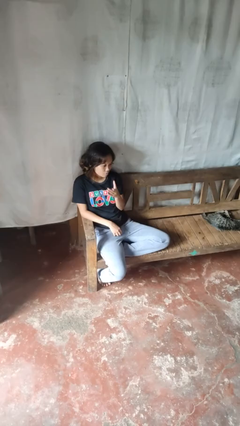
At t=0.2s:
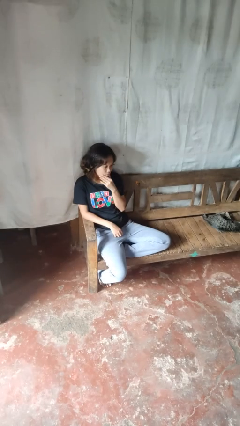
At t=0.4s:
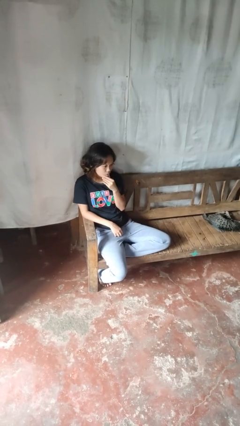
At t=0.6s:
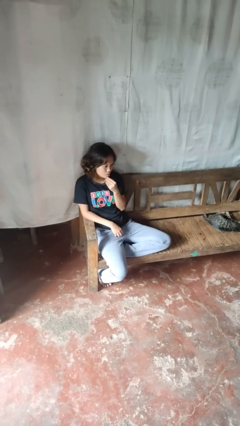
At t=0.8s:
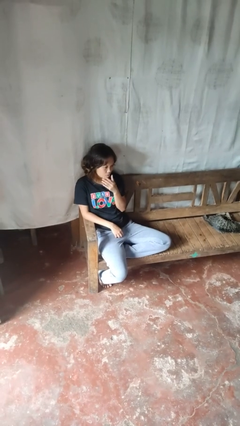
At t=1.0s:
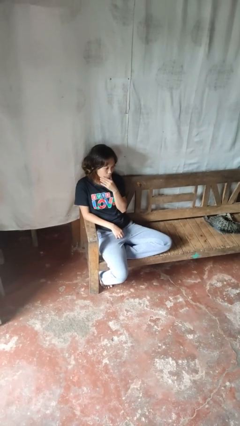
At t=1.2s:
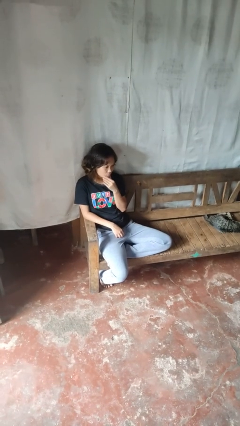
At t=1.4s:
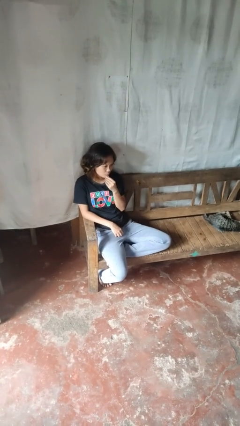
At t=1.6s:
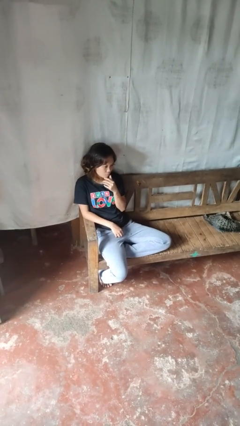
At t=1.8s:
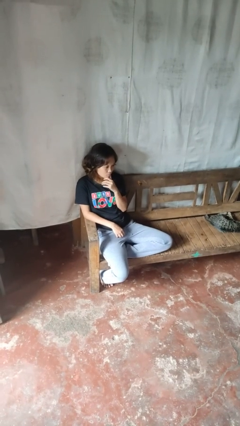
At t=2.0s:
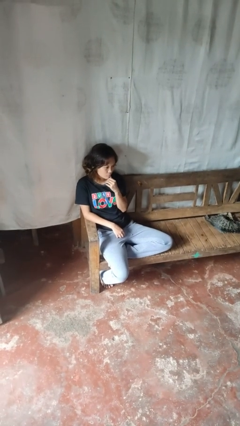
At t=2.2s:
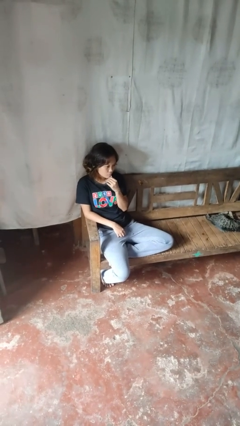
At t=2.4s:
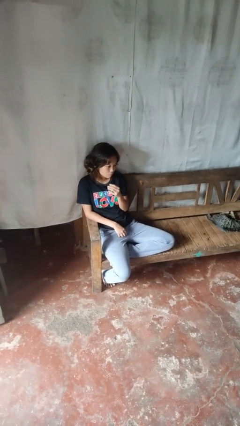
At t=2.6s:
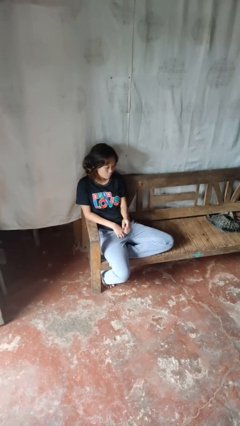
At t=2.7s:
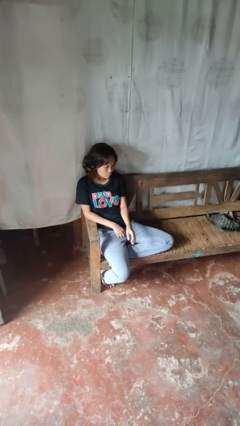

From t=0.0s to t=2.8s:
person strokes chin

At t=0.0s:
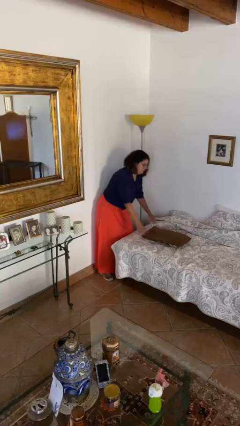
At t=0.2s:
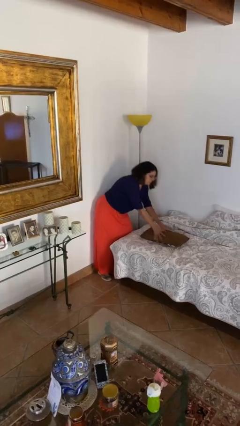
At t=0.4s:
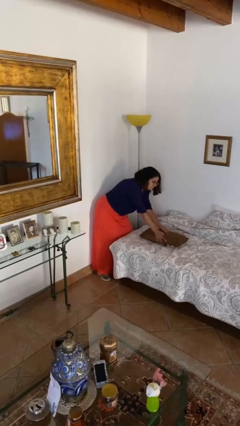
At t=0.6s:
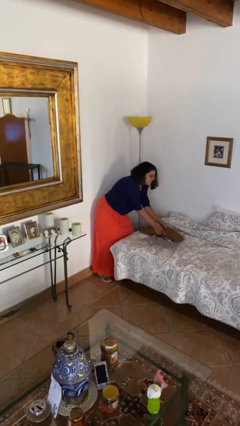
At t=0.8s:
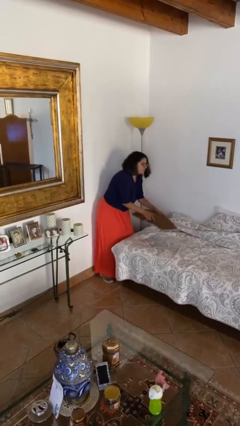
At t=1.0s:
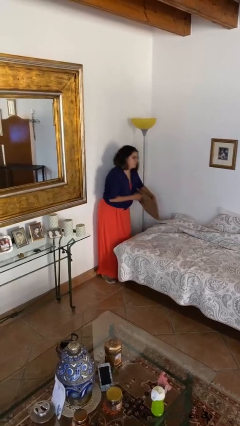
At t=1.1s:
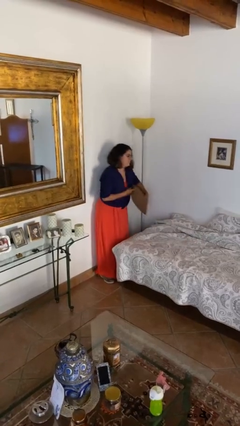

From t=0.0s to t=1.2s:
person picks up object from bed

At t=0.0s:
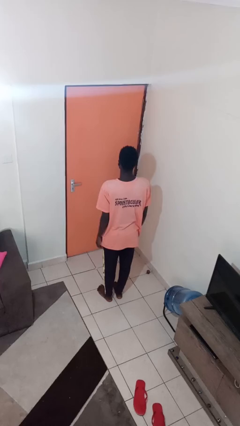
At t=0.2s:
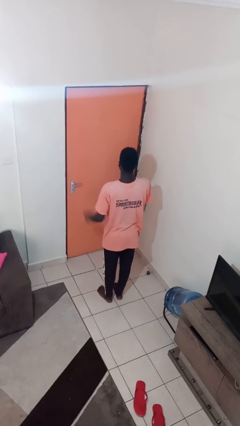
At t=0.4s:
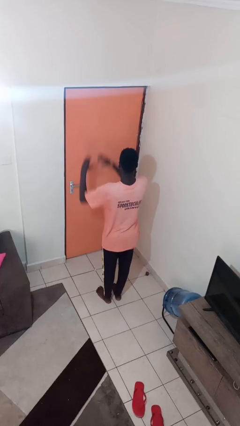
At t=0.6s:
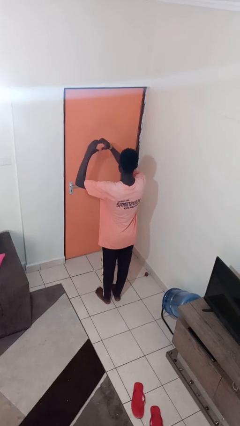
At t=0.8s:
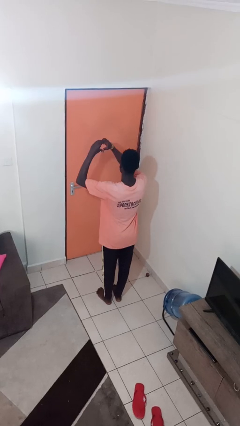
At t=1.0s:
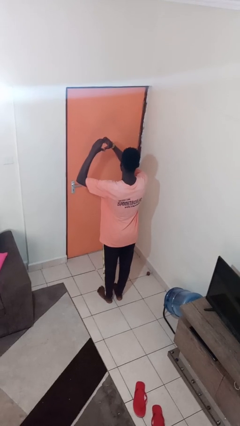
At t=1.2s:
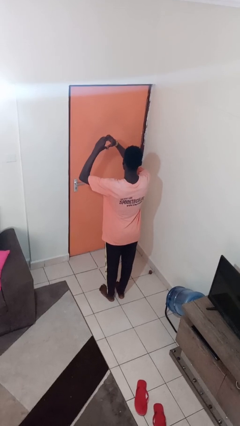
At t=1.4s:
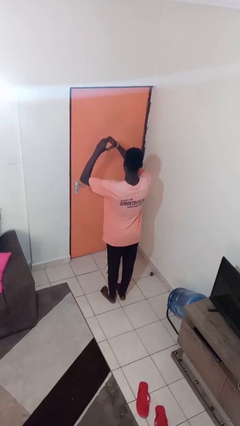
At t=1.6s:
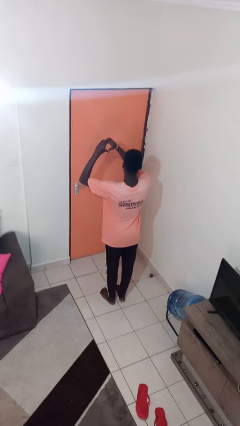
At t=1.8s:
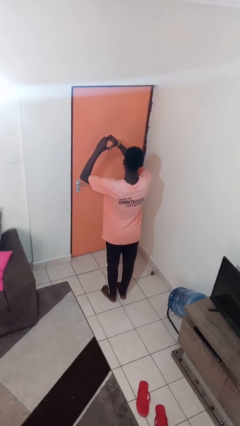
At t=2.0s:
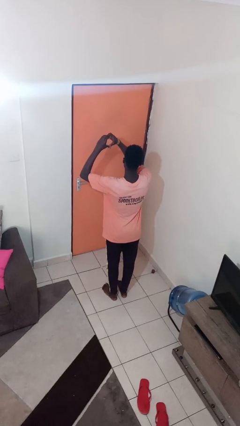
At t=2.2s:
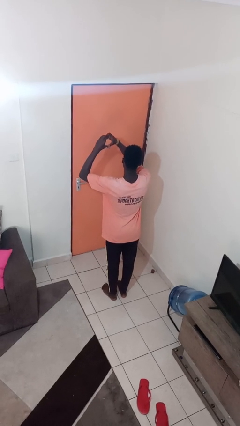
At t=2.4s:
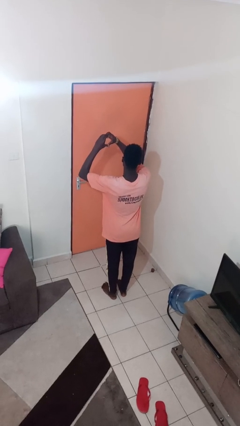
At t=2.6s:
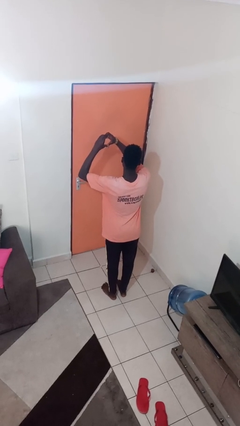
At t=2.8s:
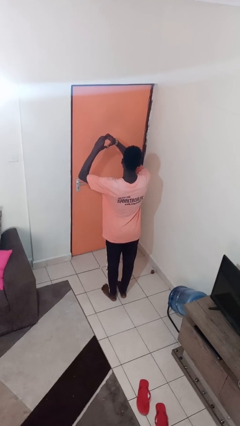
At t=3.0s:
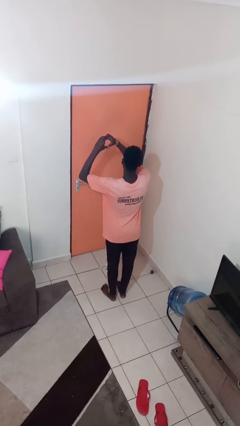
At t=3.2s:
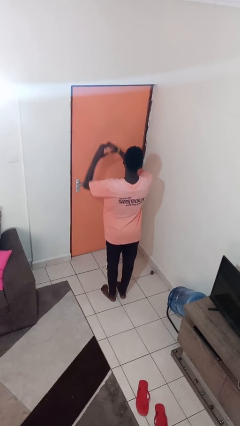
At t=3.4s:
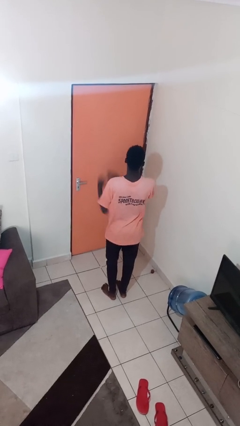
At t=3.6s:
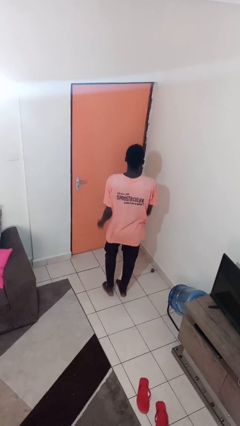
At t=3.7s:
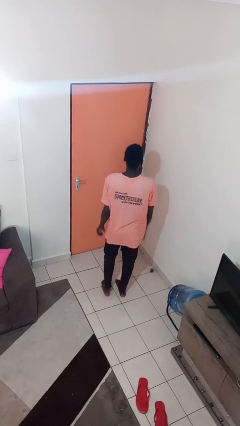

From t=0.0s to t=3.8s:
person gestures heart

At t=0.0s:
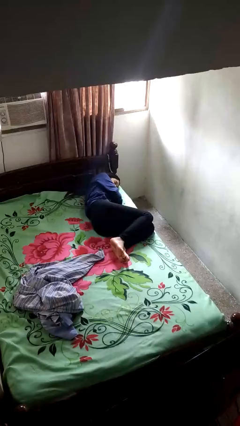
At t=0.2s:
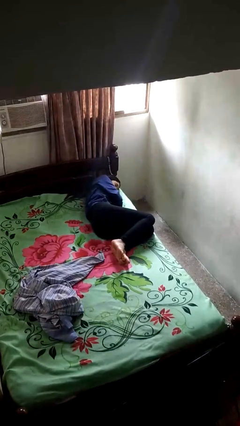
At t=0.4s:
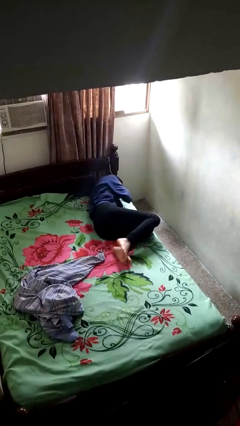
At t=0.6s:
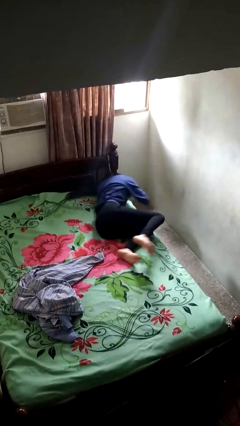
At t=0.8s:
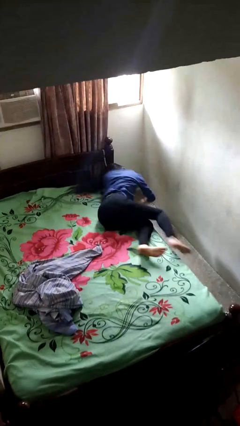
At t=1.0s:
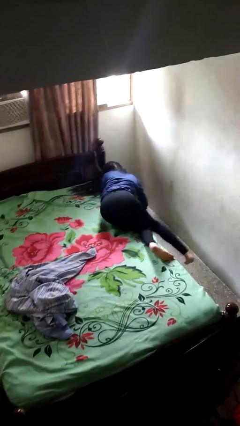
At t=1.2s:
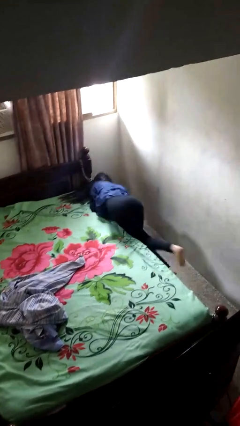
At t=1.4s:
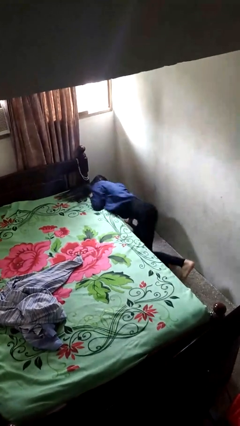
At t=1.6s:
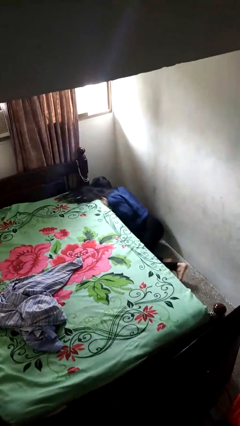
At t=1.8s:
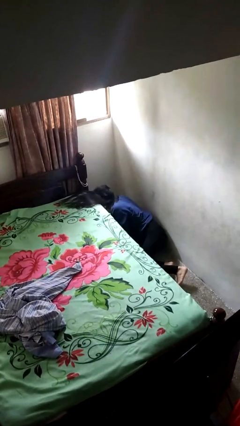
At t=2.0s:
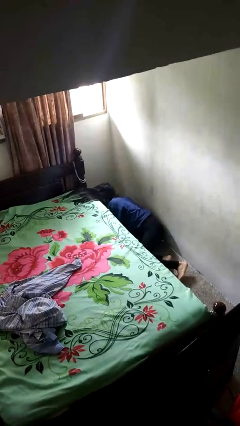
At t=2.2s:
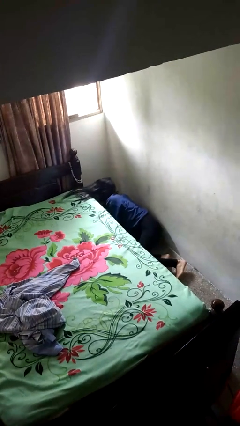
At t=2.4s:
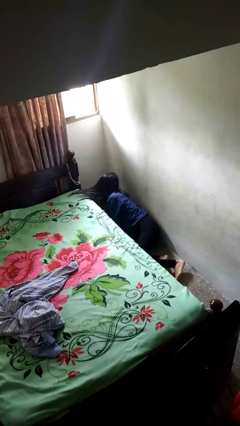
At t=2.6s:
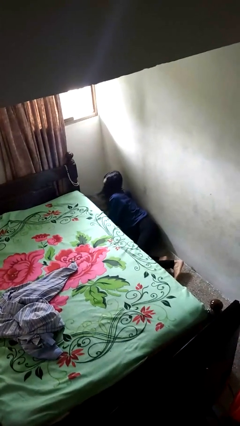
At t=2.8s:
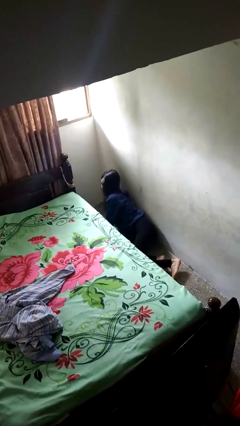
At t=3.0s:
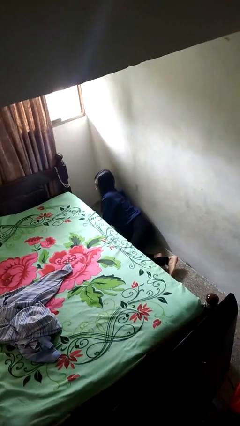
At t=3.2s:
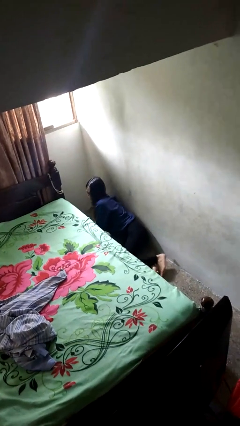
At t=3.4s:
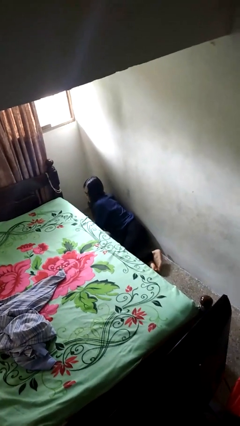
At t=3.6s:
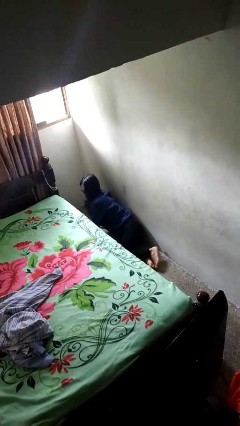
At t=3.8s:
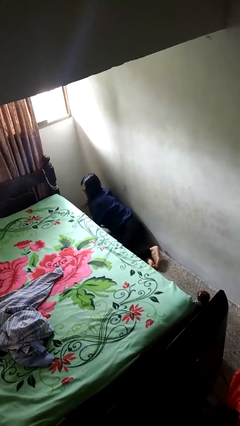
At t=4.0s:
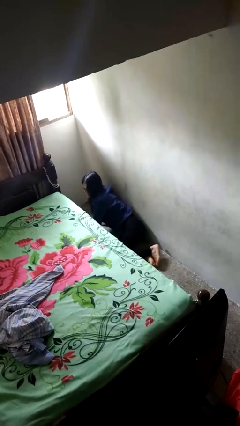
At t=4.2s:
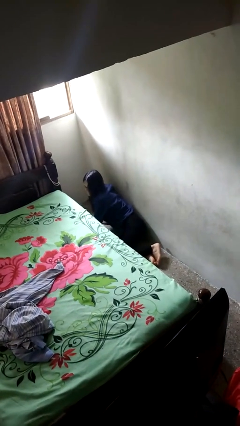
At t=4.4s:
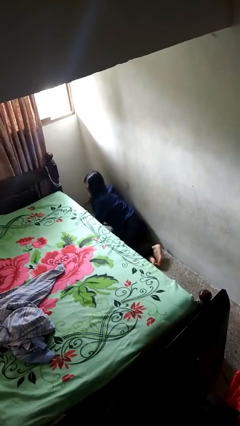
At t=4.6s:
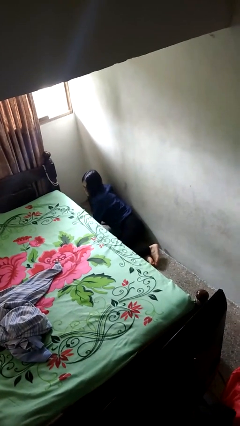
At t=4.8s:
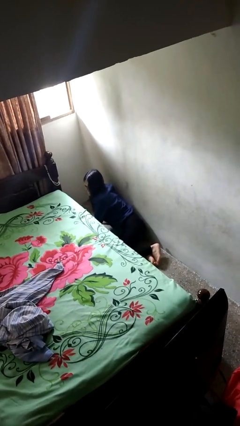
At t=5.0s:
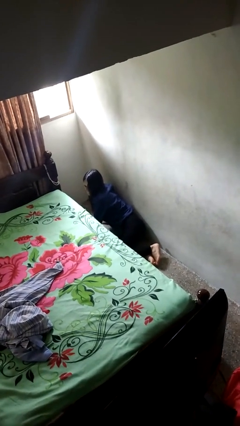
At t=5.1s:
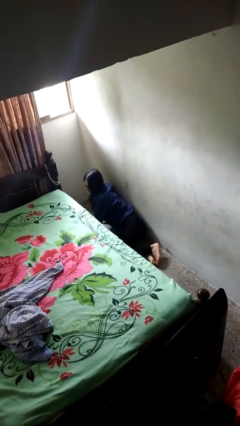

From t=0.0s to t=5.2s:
person falls from bed

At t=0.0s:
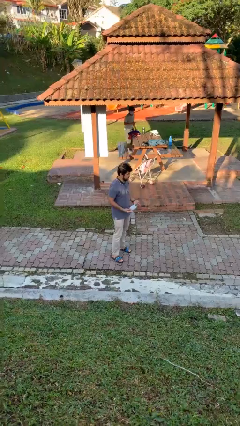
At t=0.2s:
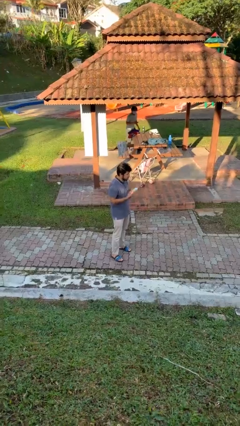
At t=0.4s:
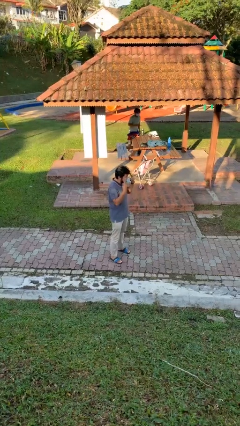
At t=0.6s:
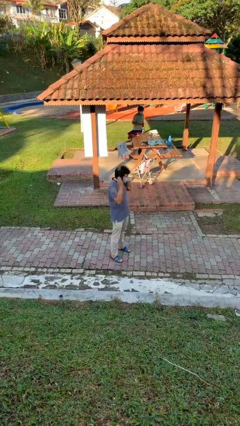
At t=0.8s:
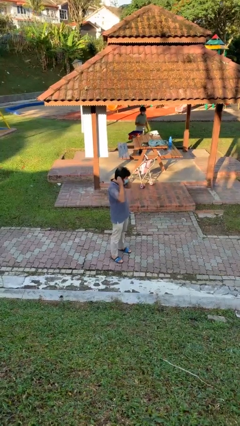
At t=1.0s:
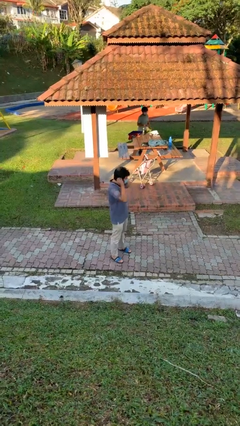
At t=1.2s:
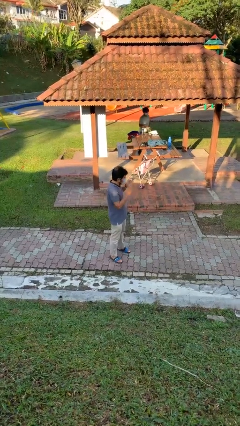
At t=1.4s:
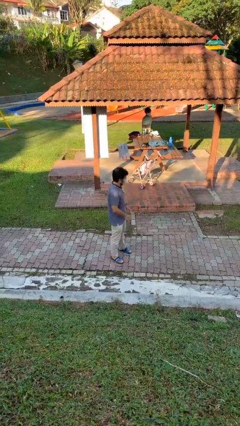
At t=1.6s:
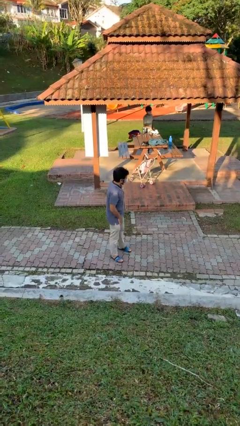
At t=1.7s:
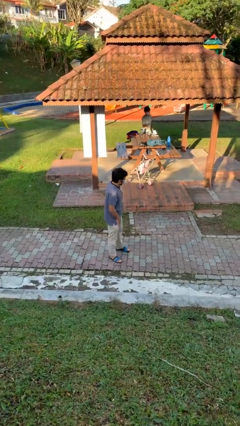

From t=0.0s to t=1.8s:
person puts on facemask

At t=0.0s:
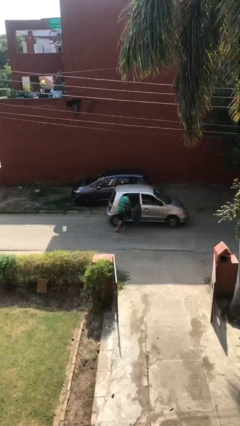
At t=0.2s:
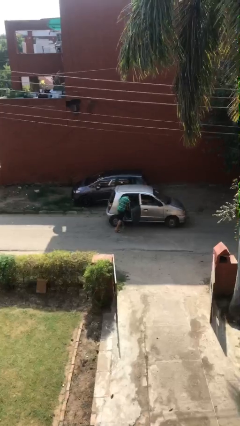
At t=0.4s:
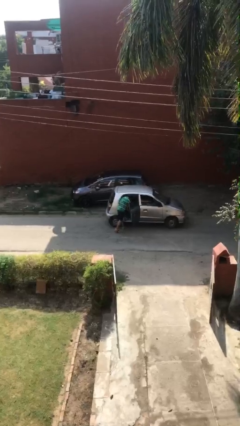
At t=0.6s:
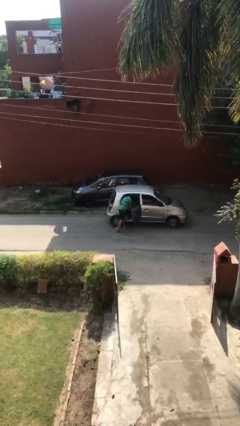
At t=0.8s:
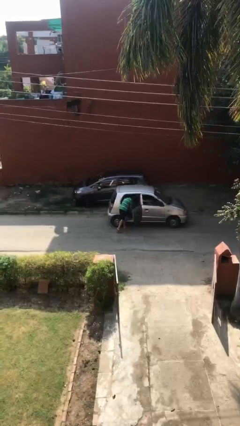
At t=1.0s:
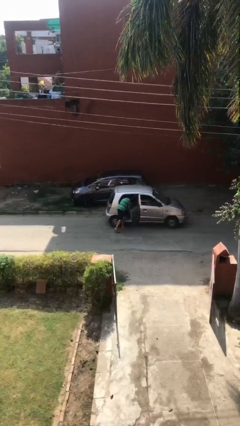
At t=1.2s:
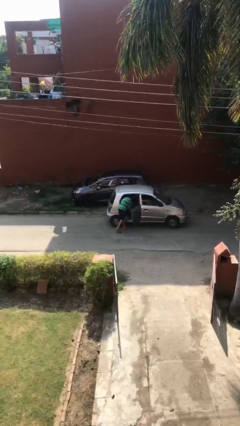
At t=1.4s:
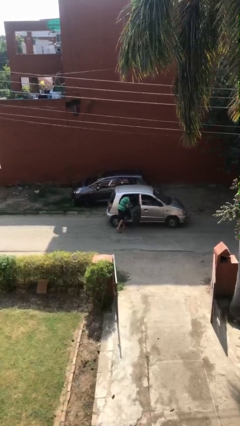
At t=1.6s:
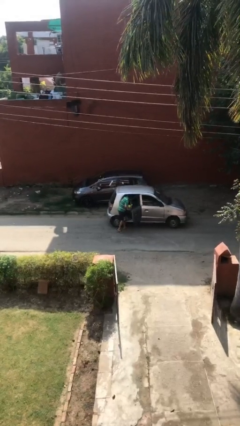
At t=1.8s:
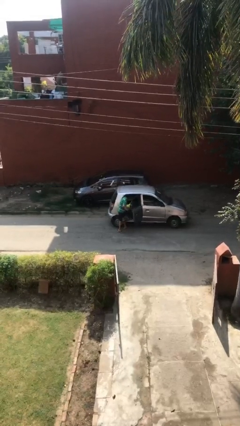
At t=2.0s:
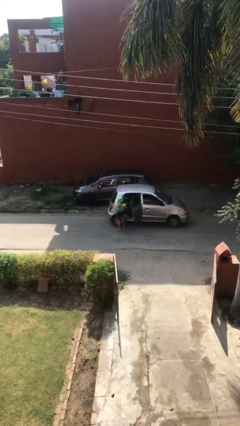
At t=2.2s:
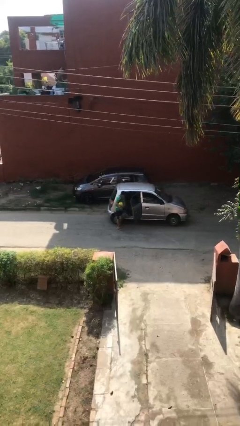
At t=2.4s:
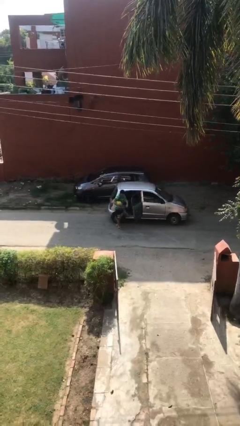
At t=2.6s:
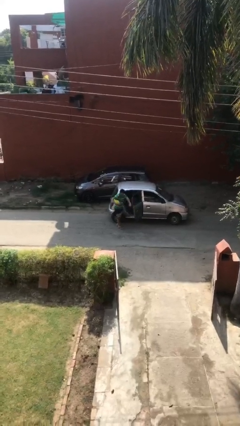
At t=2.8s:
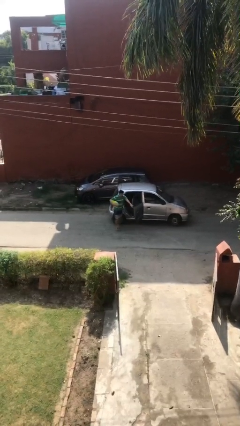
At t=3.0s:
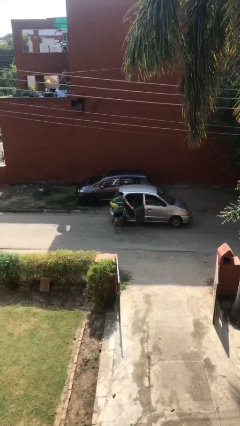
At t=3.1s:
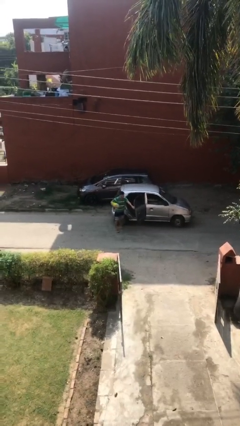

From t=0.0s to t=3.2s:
person unloads car
